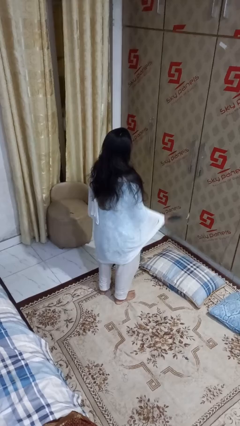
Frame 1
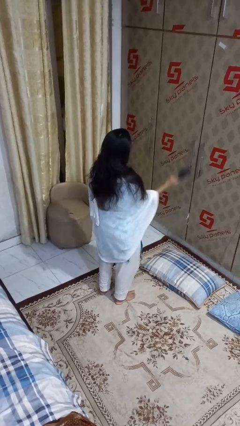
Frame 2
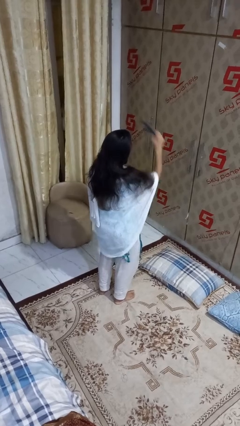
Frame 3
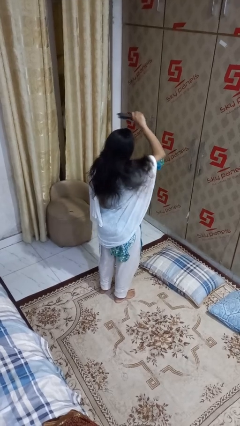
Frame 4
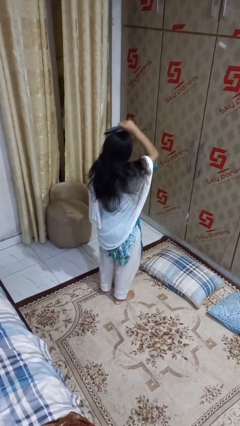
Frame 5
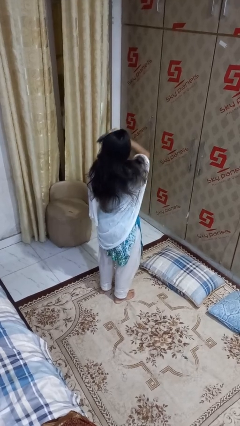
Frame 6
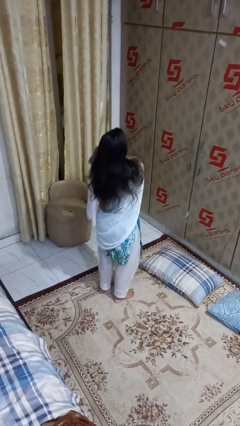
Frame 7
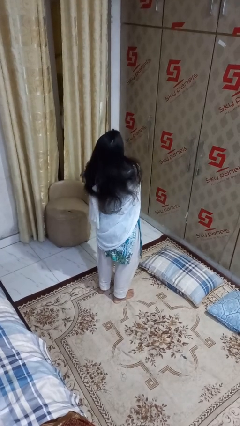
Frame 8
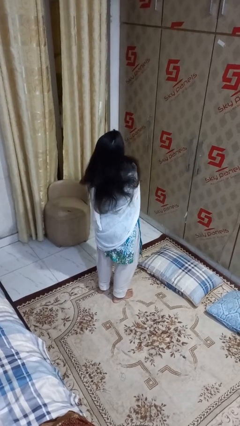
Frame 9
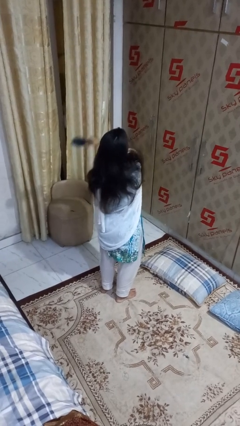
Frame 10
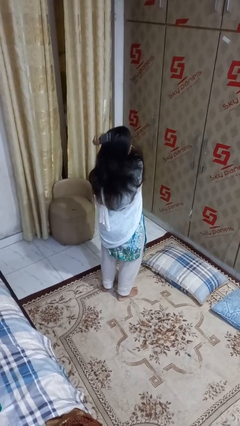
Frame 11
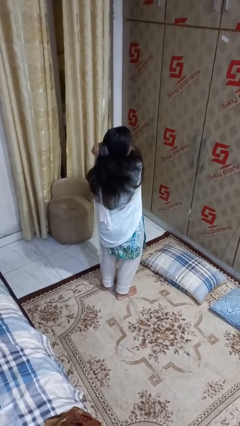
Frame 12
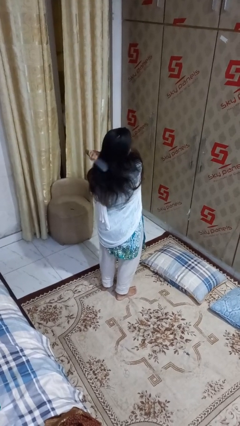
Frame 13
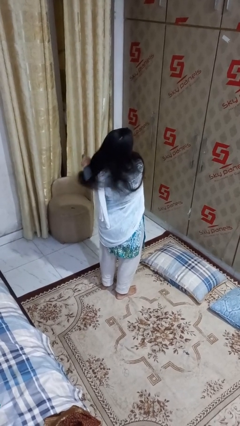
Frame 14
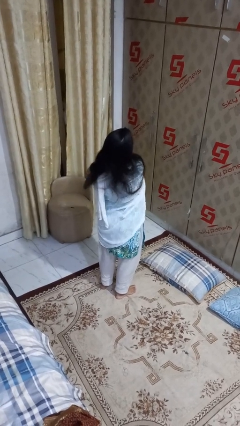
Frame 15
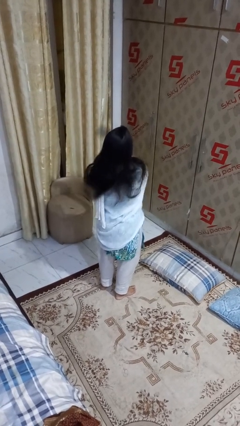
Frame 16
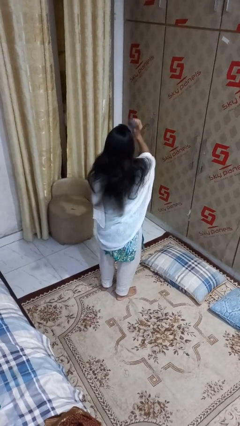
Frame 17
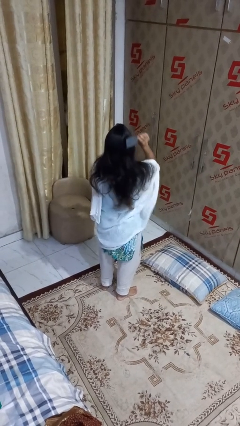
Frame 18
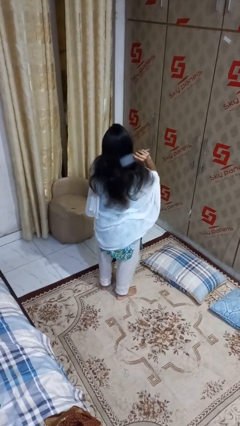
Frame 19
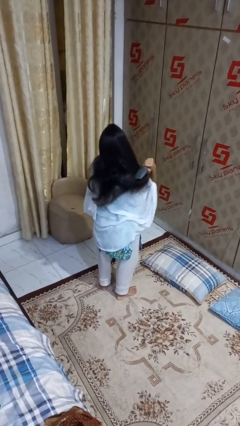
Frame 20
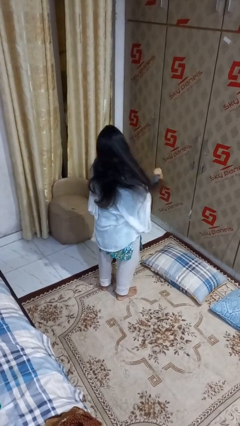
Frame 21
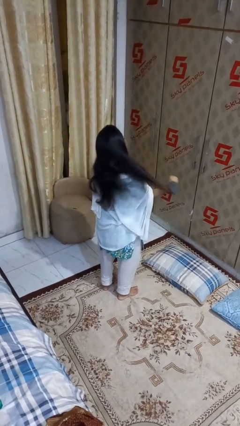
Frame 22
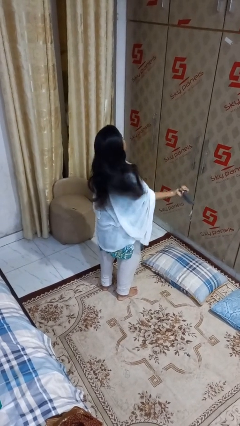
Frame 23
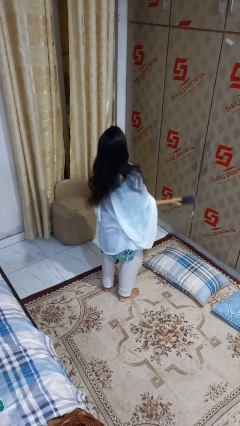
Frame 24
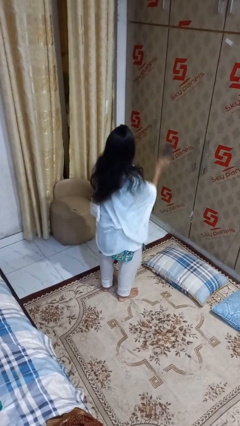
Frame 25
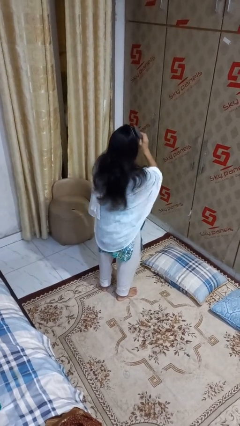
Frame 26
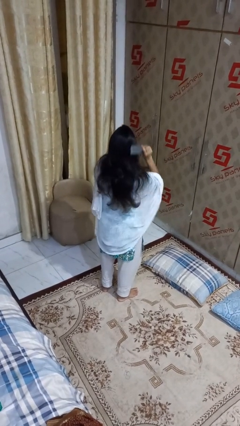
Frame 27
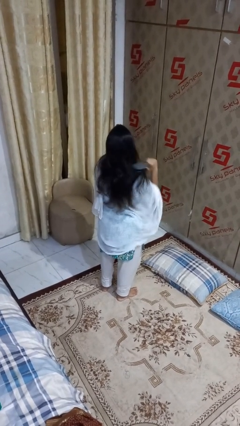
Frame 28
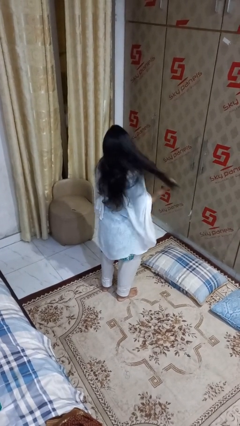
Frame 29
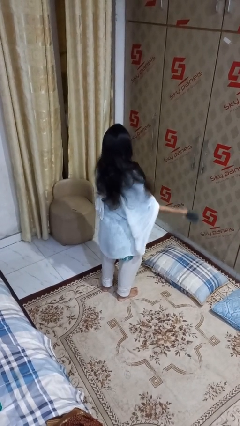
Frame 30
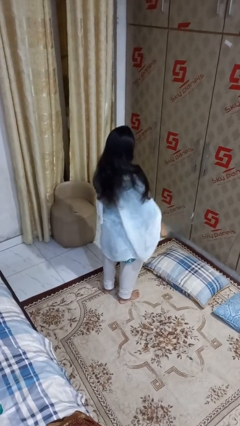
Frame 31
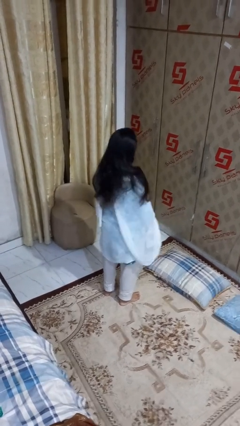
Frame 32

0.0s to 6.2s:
person brushes hair

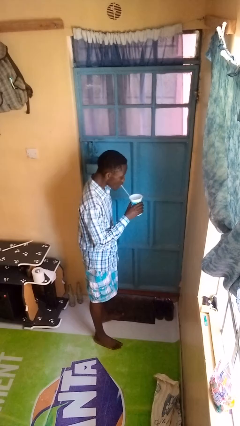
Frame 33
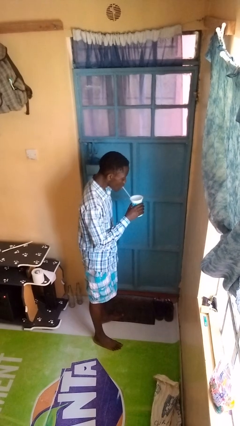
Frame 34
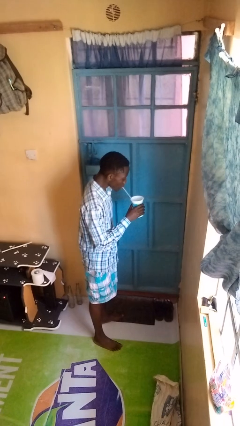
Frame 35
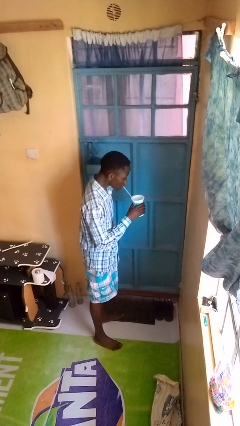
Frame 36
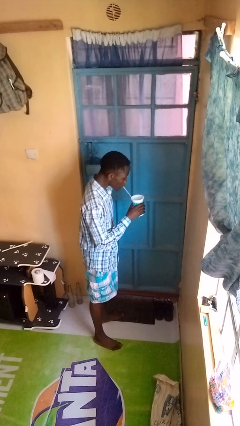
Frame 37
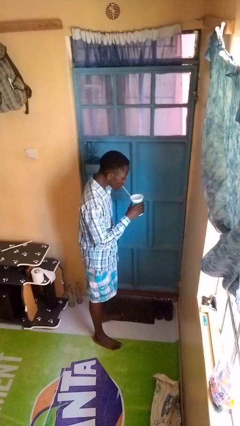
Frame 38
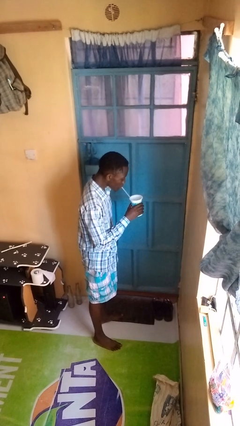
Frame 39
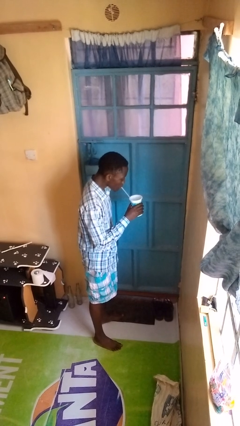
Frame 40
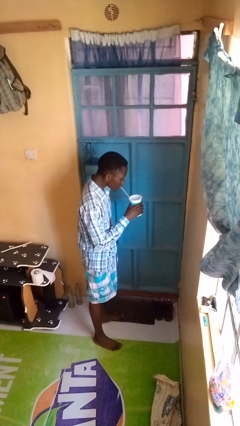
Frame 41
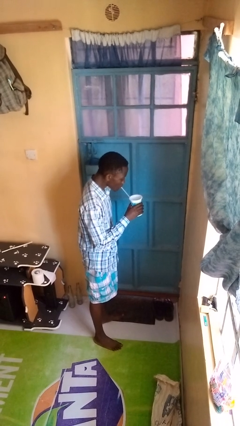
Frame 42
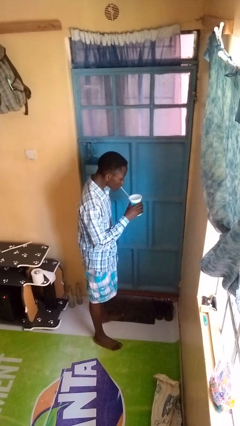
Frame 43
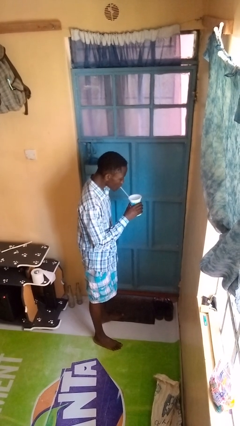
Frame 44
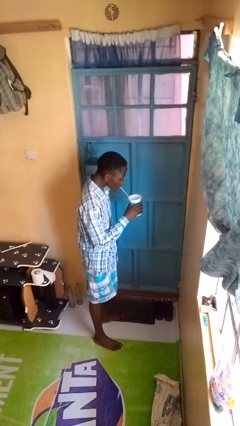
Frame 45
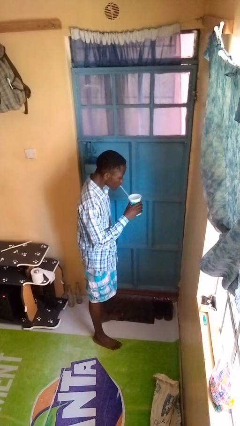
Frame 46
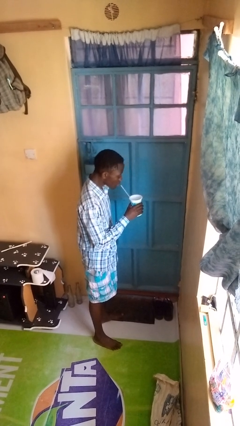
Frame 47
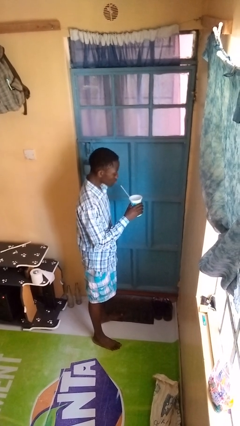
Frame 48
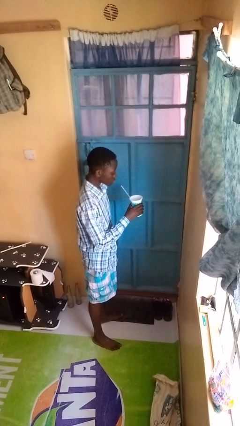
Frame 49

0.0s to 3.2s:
person drinks from straw

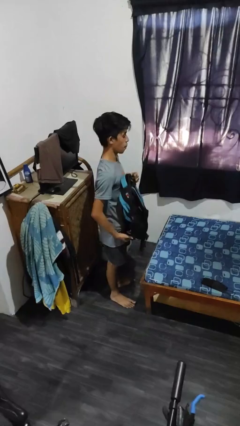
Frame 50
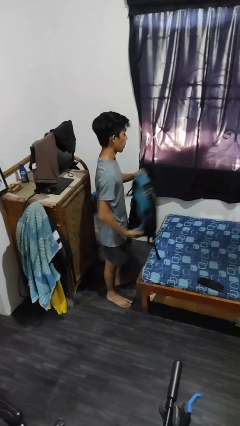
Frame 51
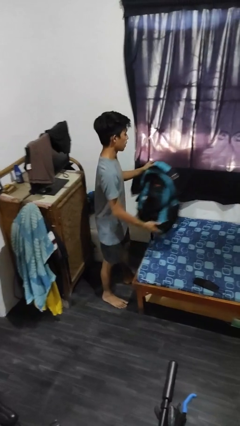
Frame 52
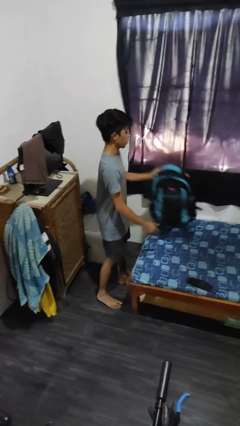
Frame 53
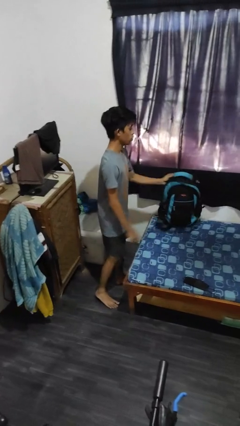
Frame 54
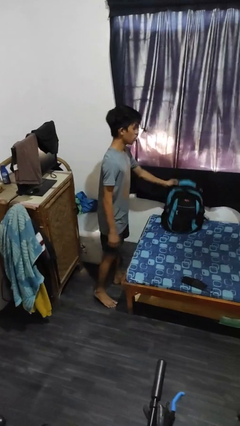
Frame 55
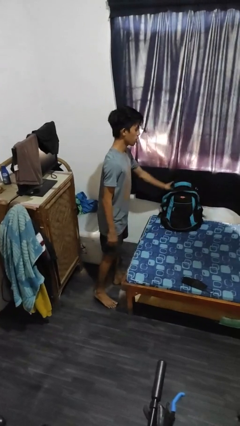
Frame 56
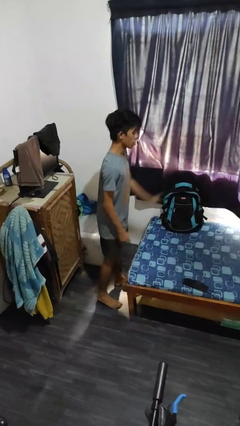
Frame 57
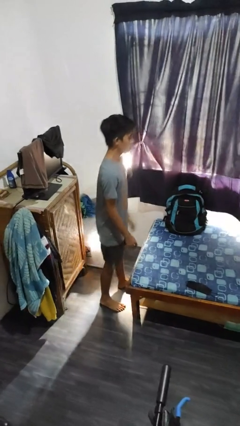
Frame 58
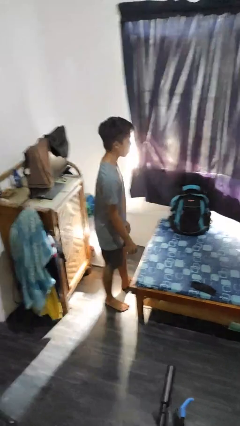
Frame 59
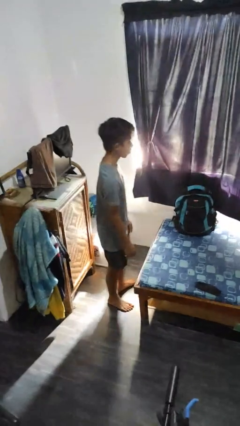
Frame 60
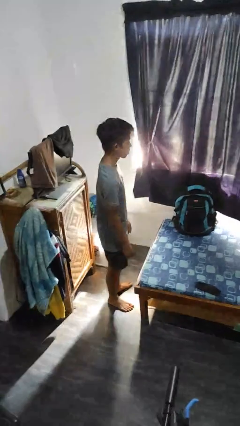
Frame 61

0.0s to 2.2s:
person puts down object on bed

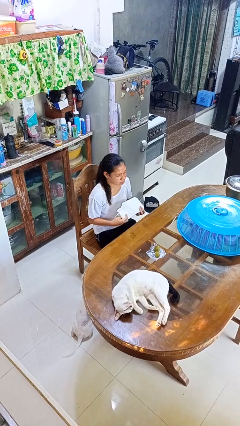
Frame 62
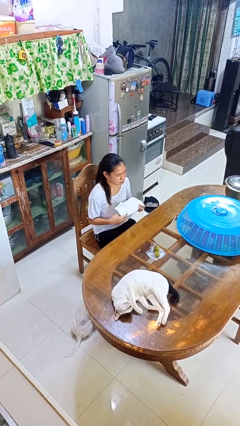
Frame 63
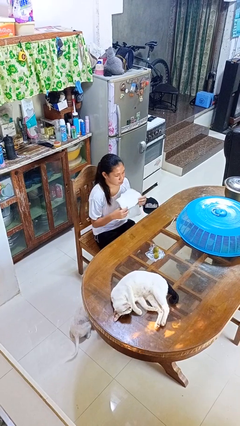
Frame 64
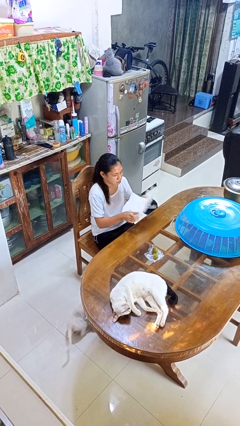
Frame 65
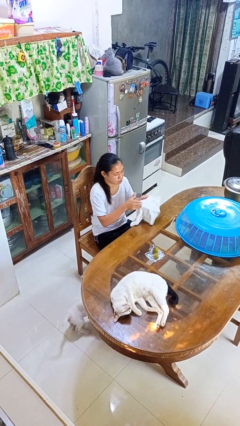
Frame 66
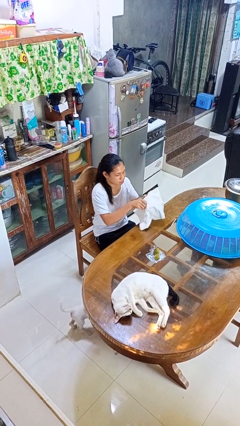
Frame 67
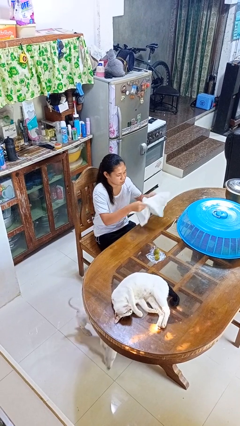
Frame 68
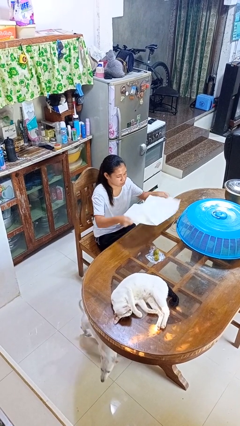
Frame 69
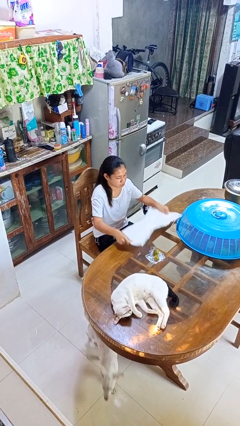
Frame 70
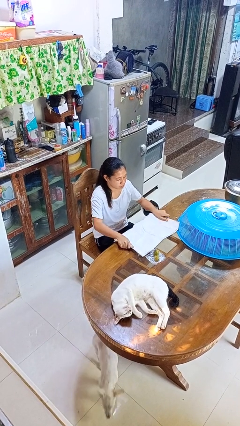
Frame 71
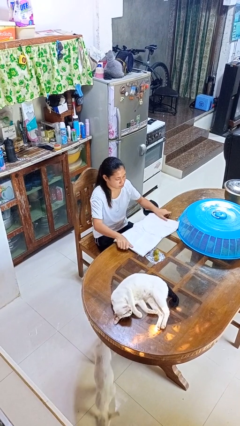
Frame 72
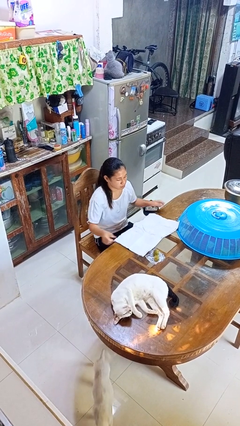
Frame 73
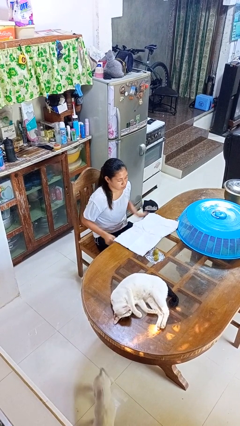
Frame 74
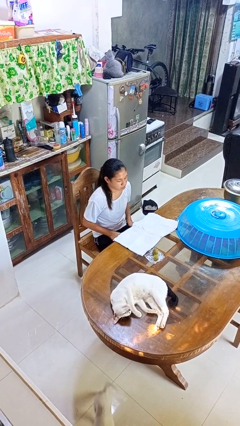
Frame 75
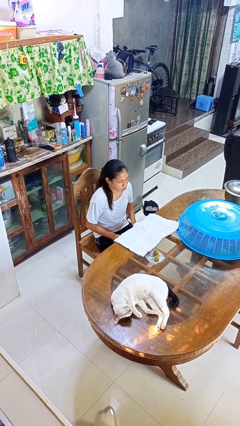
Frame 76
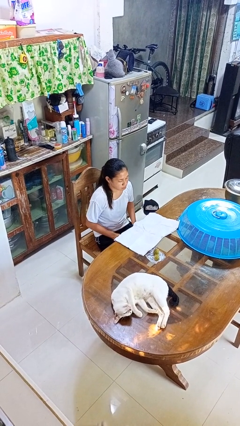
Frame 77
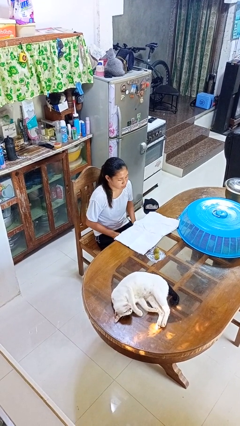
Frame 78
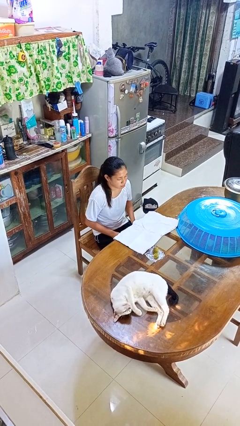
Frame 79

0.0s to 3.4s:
person spreads tablecloth

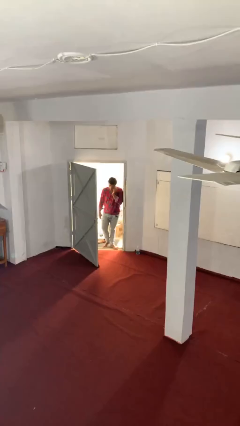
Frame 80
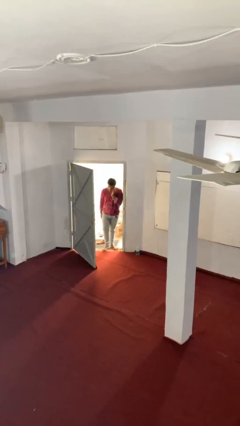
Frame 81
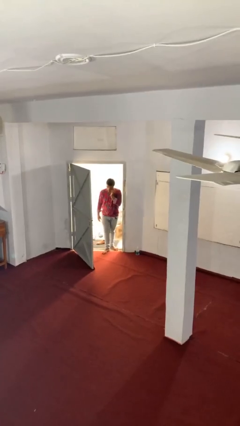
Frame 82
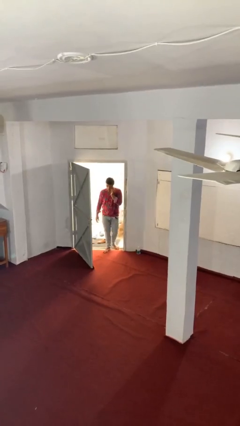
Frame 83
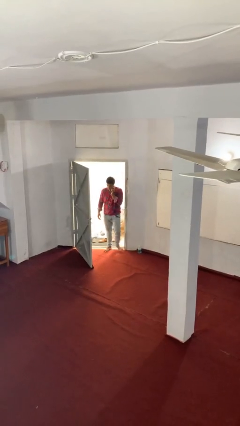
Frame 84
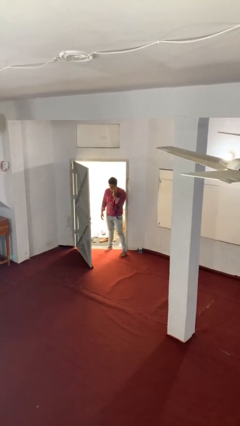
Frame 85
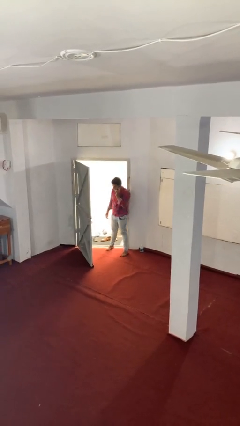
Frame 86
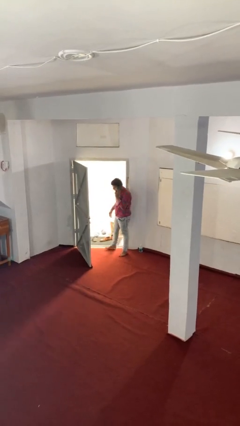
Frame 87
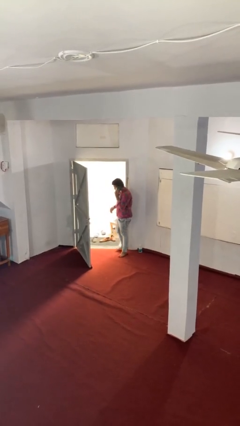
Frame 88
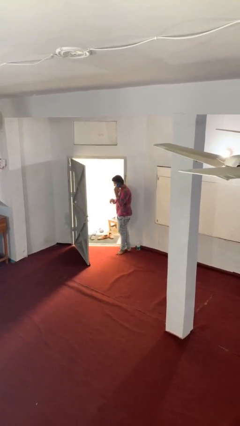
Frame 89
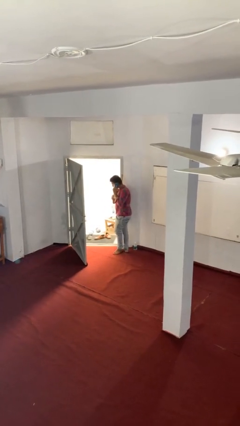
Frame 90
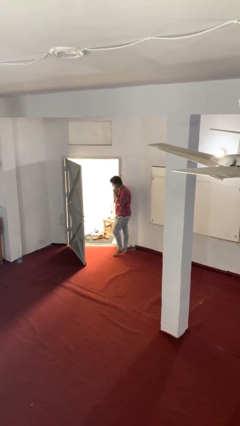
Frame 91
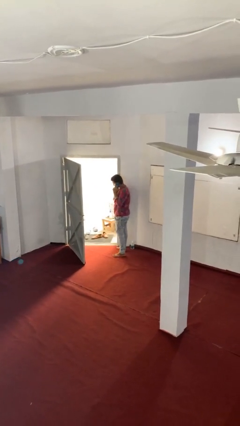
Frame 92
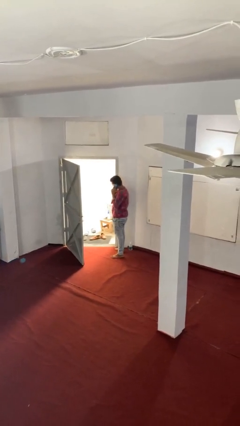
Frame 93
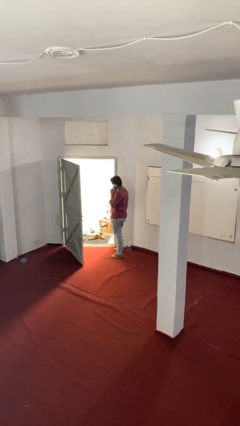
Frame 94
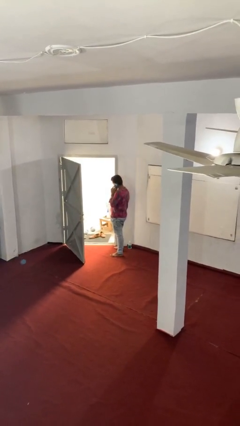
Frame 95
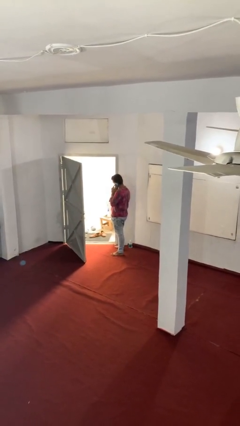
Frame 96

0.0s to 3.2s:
person enters scene through structure
